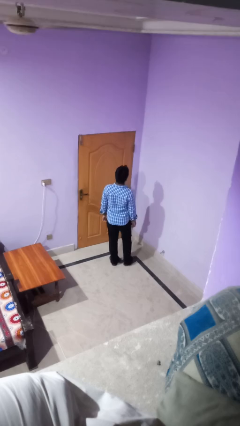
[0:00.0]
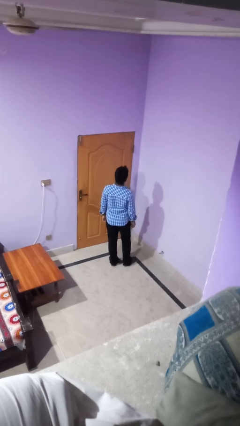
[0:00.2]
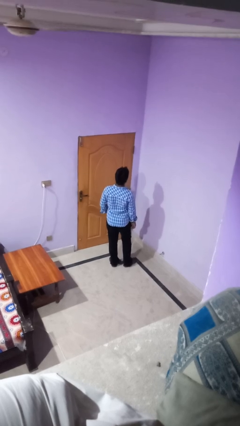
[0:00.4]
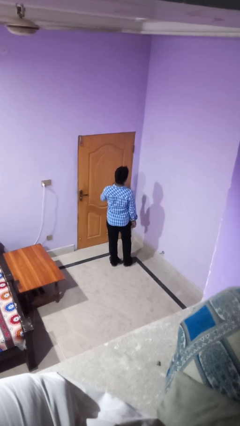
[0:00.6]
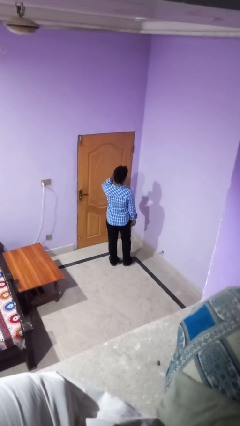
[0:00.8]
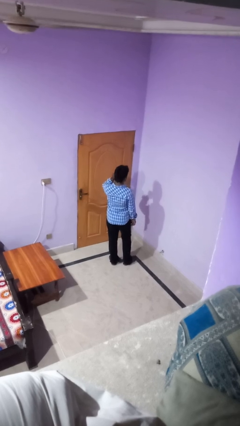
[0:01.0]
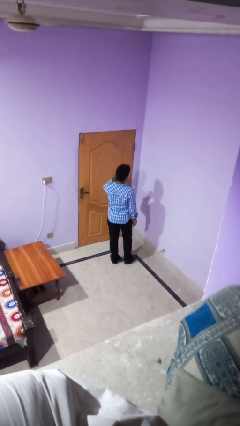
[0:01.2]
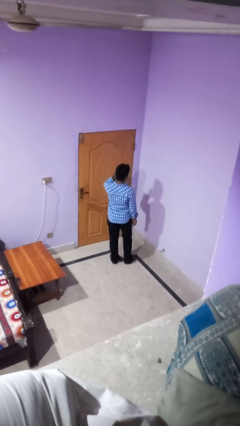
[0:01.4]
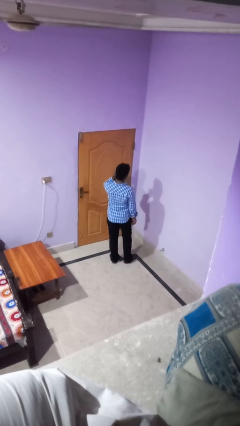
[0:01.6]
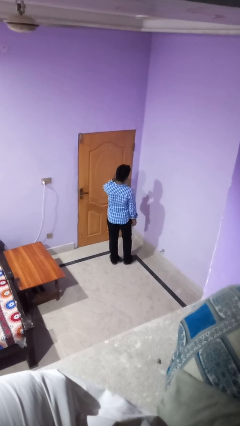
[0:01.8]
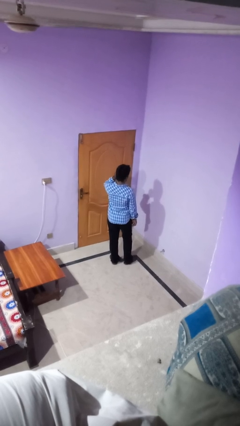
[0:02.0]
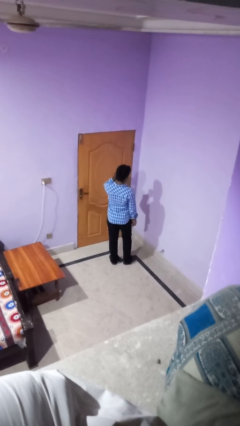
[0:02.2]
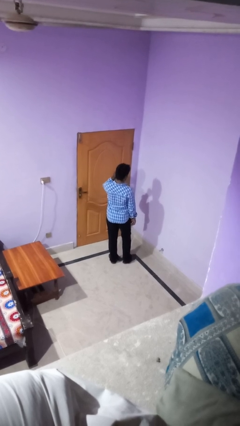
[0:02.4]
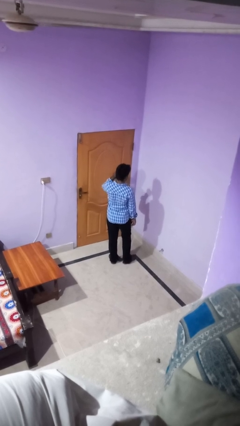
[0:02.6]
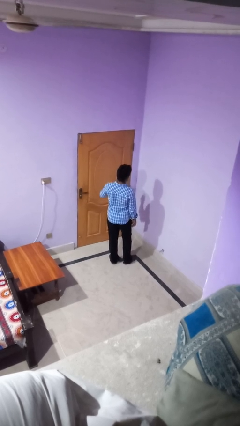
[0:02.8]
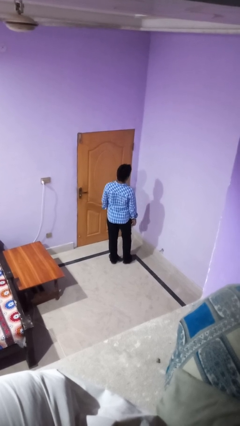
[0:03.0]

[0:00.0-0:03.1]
person touches earlobe

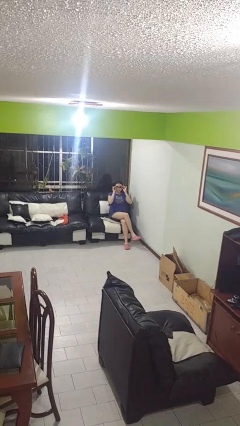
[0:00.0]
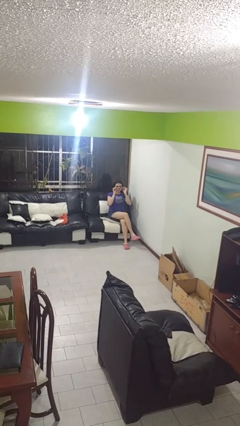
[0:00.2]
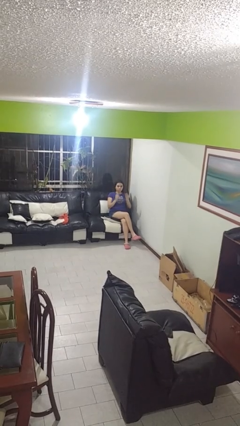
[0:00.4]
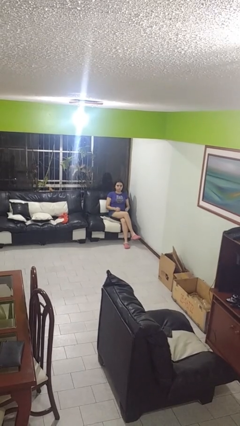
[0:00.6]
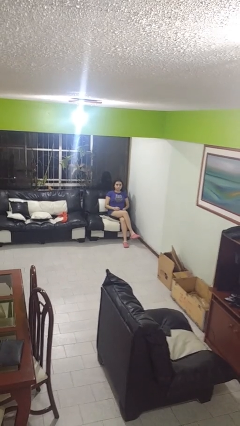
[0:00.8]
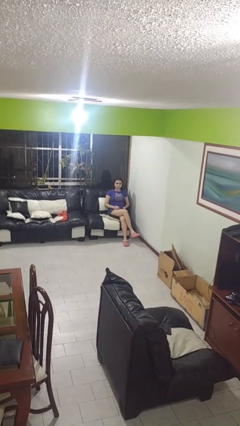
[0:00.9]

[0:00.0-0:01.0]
person takes off glasses

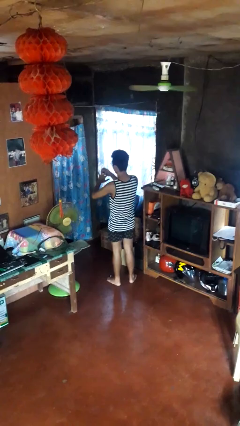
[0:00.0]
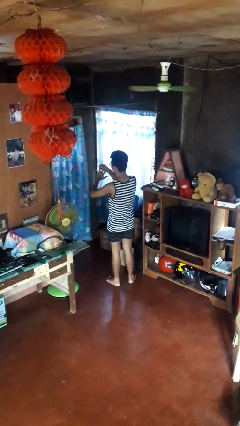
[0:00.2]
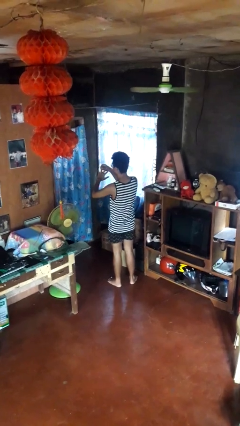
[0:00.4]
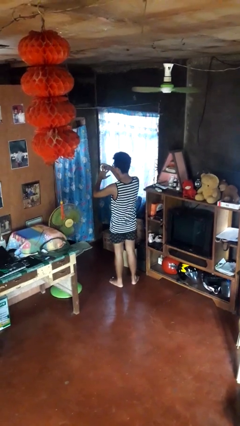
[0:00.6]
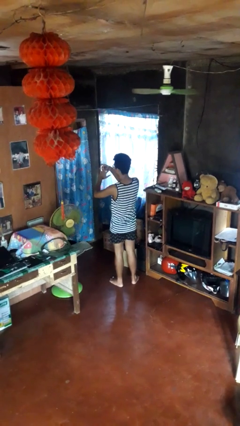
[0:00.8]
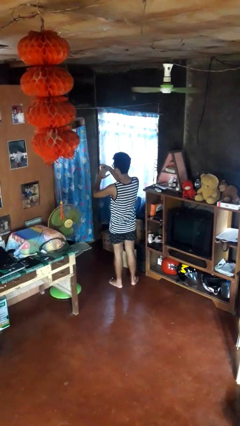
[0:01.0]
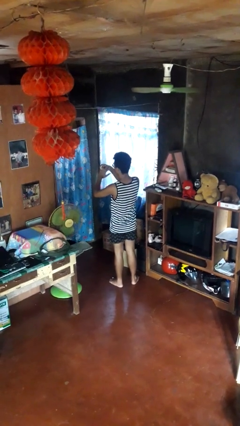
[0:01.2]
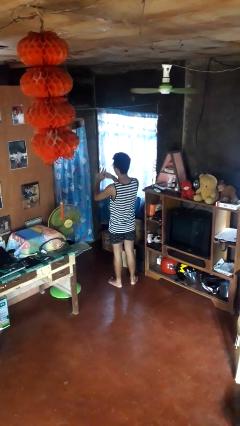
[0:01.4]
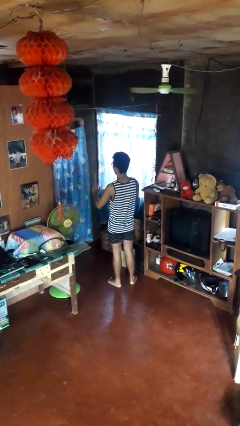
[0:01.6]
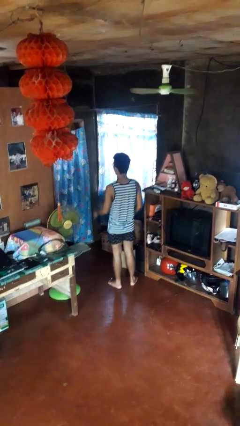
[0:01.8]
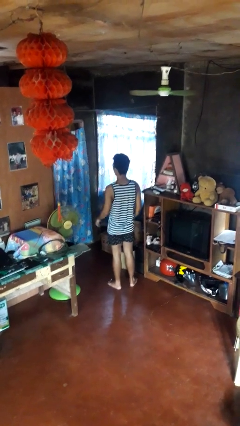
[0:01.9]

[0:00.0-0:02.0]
person puts on ring

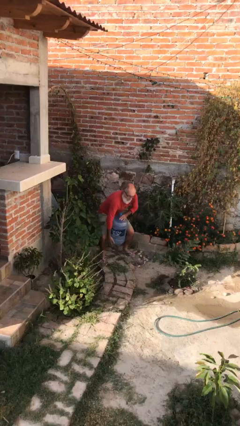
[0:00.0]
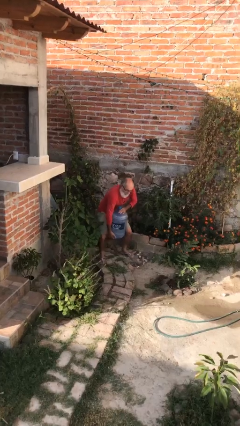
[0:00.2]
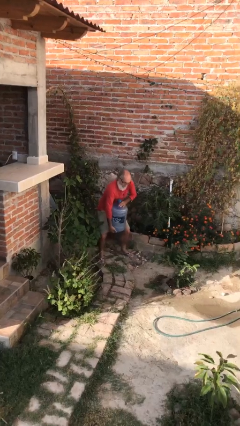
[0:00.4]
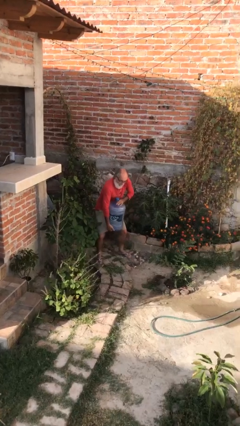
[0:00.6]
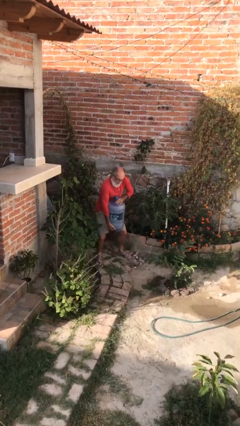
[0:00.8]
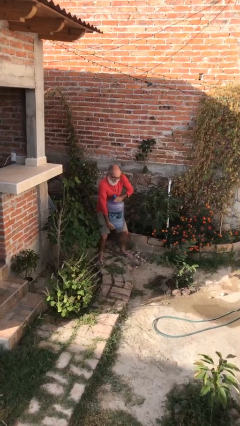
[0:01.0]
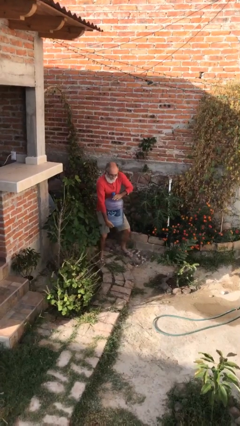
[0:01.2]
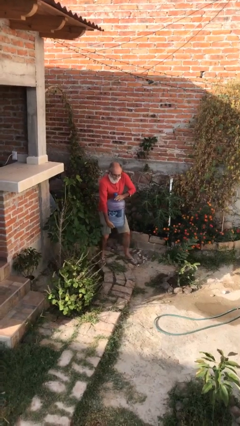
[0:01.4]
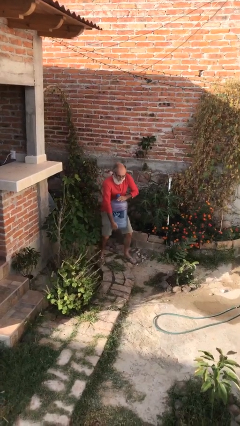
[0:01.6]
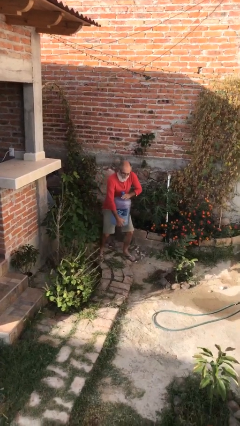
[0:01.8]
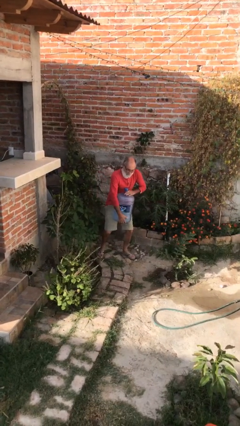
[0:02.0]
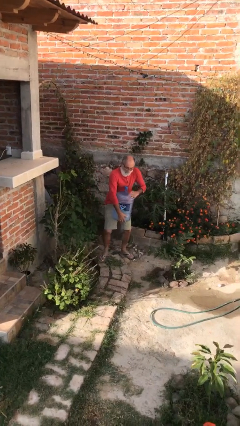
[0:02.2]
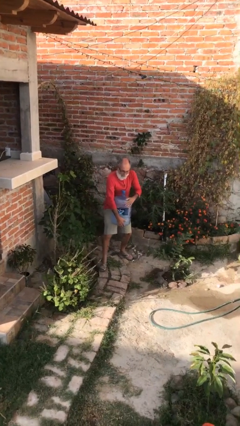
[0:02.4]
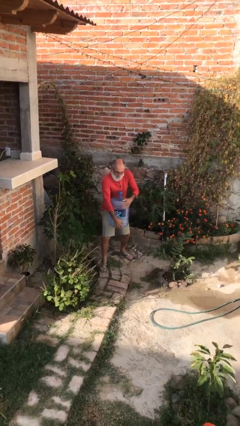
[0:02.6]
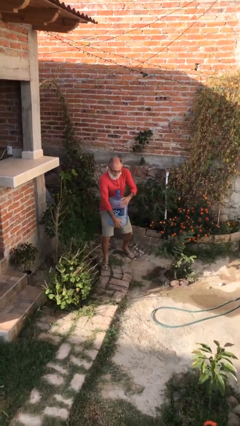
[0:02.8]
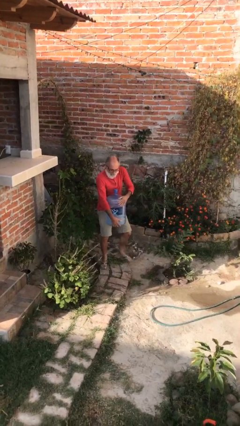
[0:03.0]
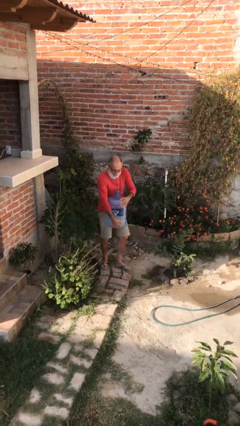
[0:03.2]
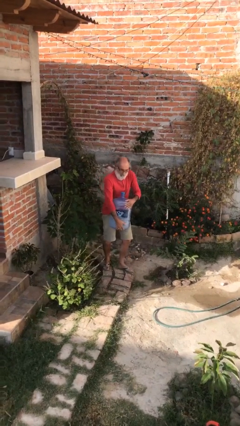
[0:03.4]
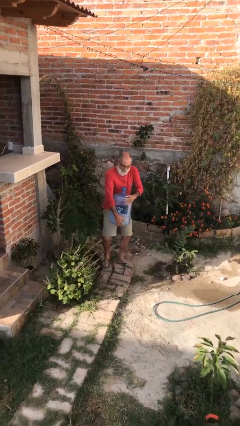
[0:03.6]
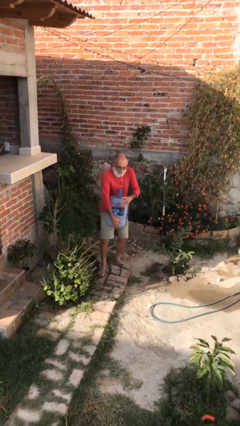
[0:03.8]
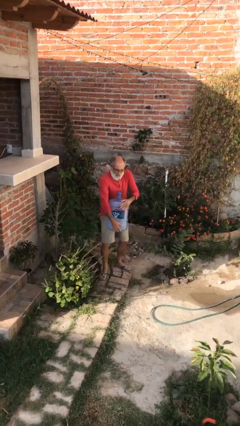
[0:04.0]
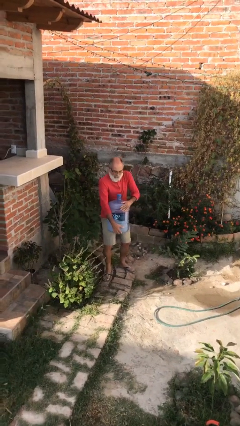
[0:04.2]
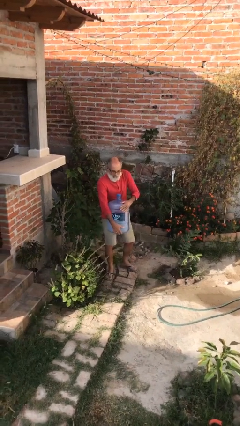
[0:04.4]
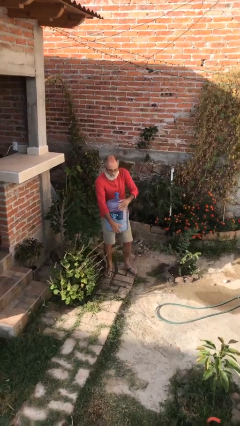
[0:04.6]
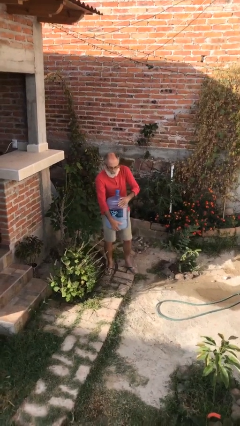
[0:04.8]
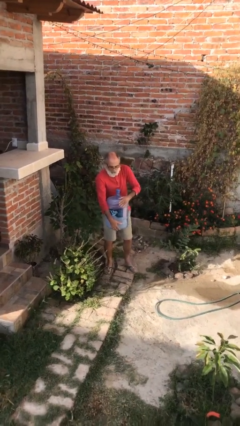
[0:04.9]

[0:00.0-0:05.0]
person carries heavy object

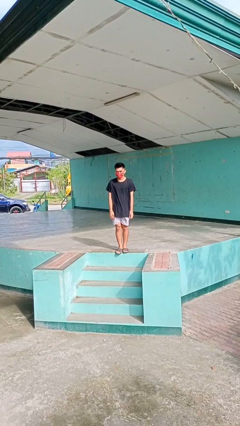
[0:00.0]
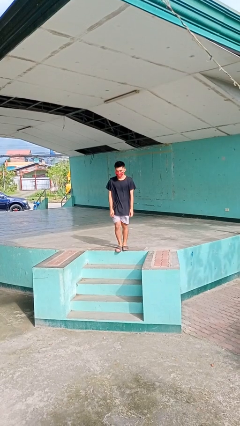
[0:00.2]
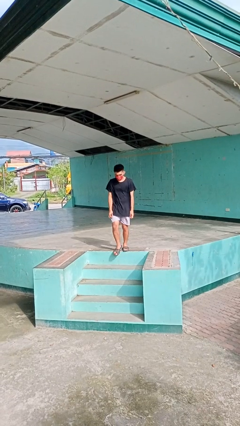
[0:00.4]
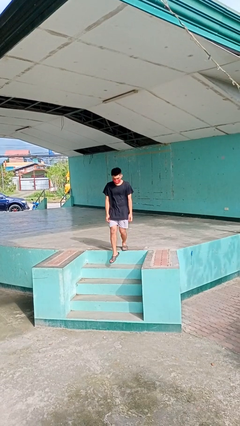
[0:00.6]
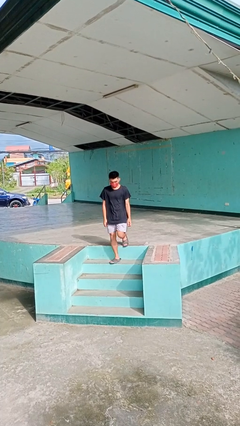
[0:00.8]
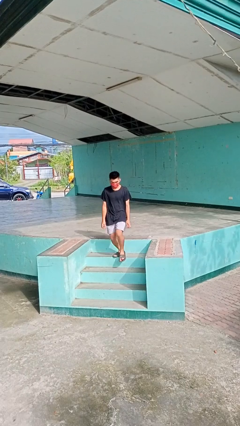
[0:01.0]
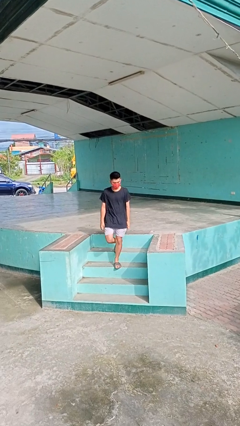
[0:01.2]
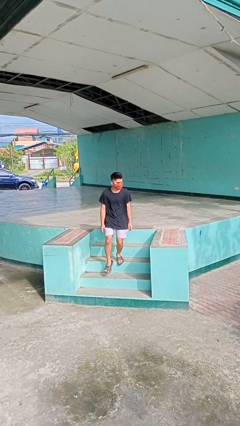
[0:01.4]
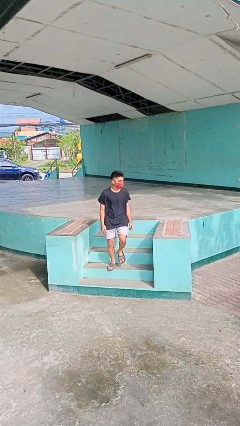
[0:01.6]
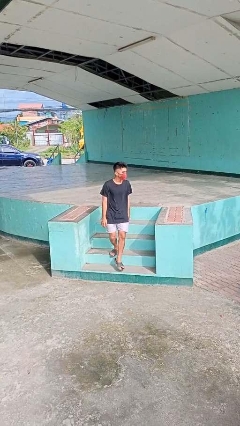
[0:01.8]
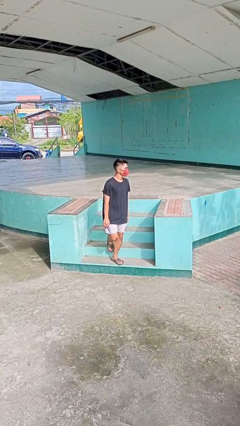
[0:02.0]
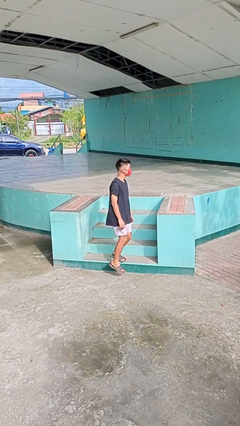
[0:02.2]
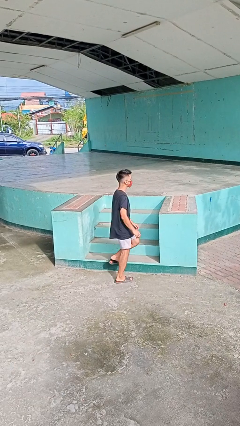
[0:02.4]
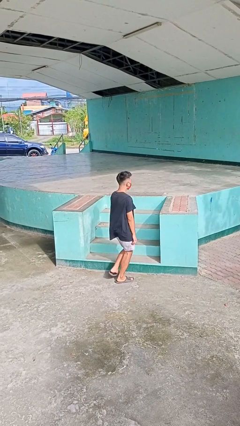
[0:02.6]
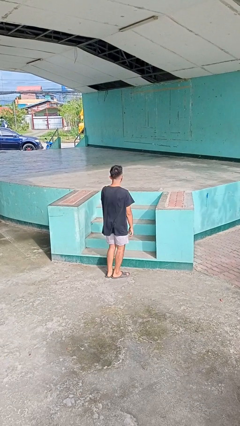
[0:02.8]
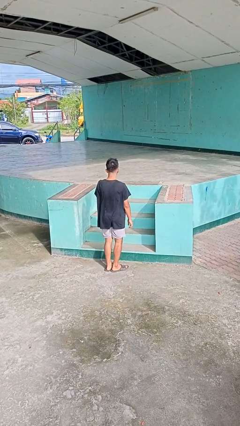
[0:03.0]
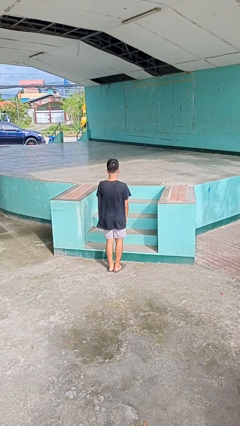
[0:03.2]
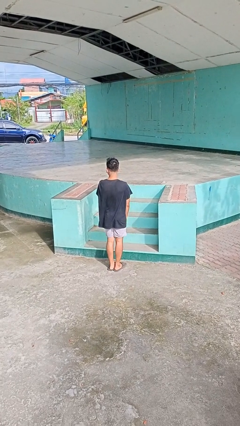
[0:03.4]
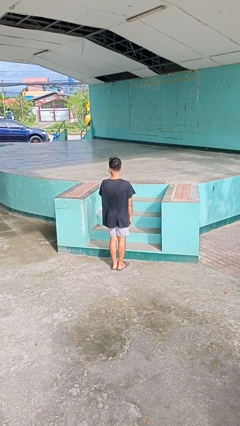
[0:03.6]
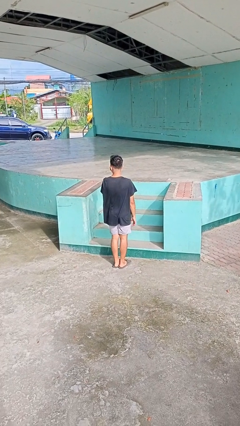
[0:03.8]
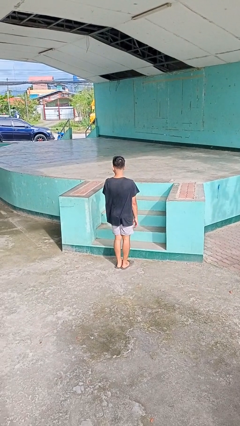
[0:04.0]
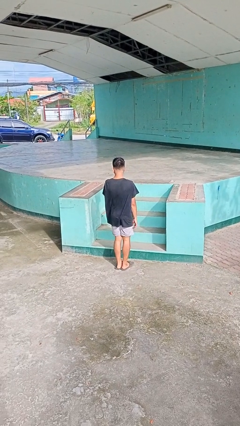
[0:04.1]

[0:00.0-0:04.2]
person climbs down stairs

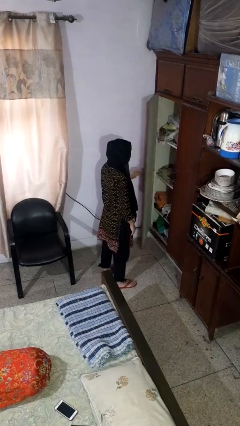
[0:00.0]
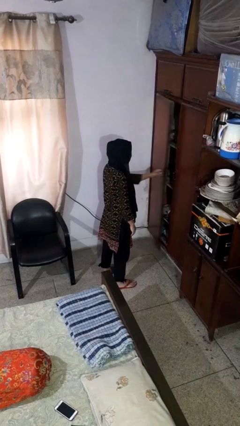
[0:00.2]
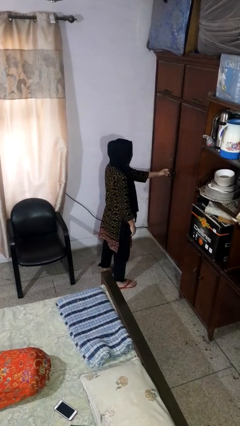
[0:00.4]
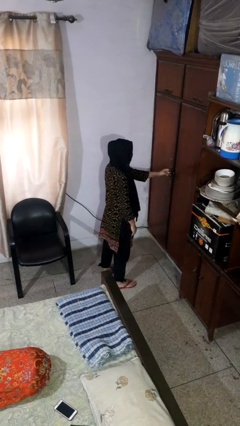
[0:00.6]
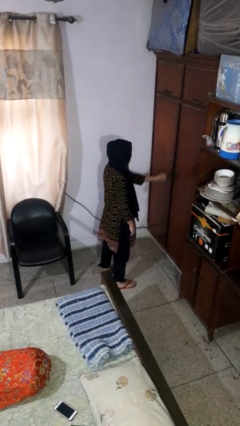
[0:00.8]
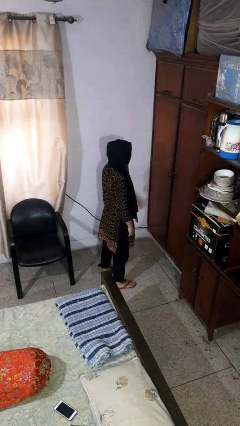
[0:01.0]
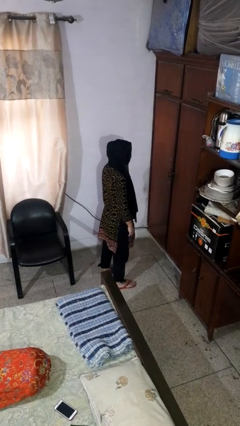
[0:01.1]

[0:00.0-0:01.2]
person closes closet door

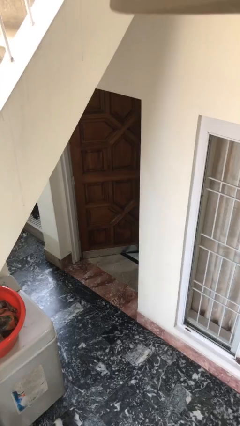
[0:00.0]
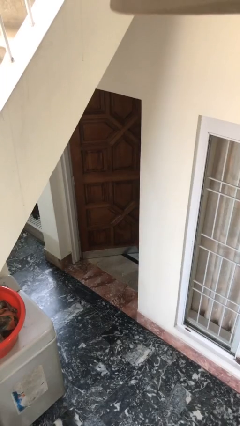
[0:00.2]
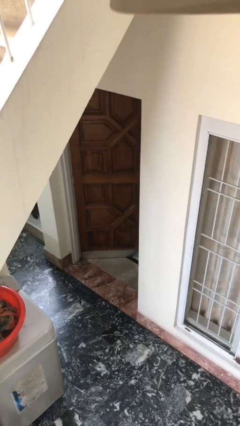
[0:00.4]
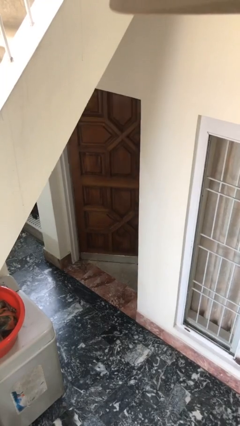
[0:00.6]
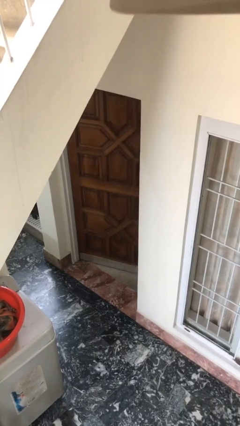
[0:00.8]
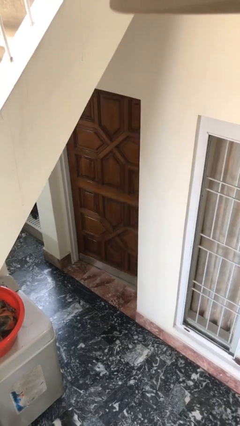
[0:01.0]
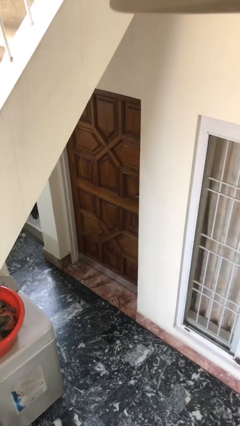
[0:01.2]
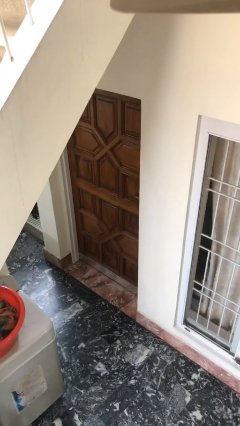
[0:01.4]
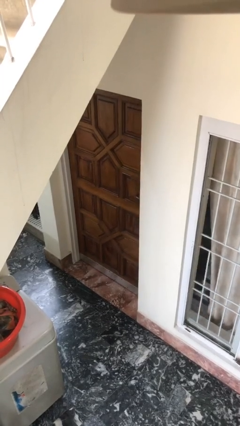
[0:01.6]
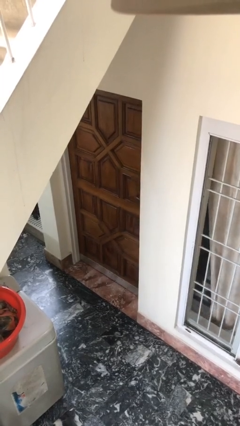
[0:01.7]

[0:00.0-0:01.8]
person closes facility door
